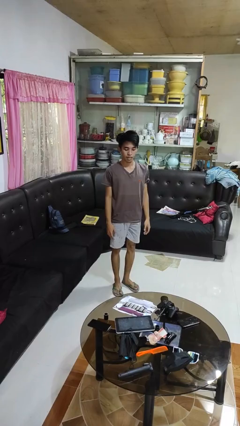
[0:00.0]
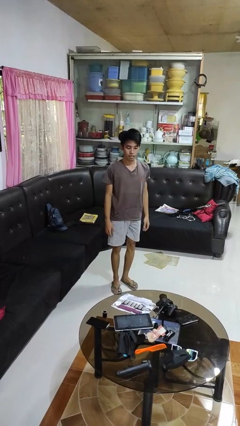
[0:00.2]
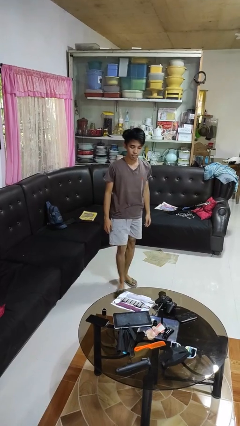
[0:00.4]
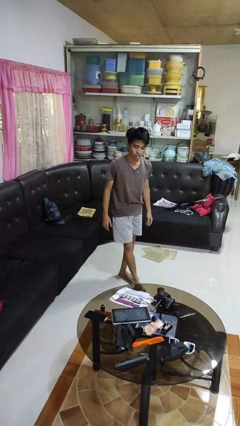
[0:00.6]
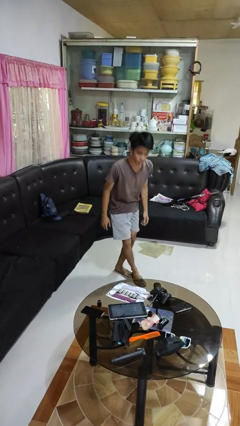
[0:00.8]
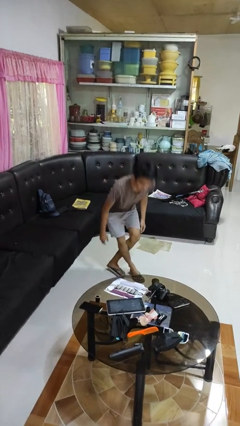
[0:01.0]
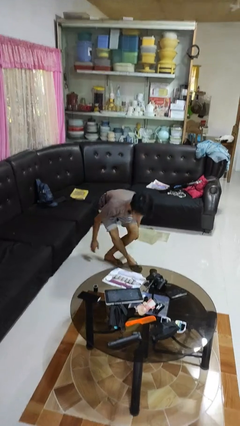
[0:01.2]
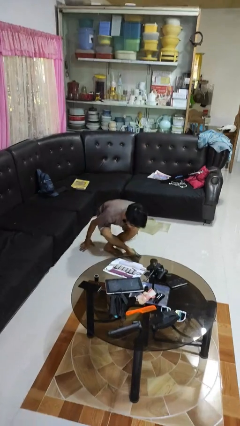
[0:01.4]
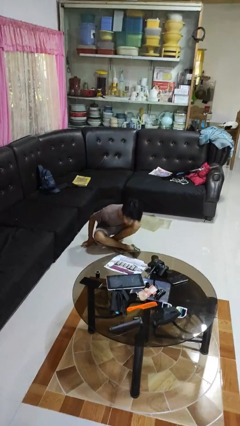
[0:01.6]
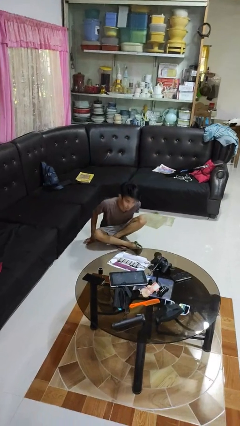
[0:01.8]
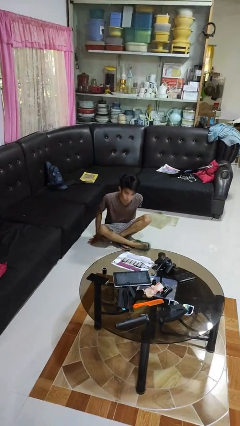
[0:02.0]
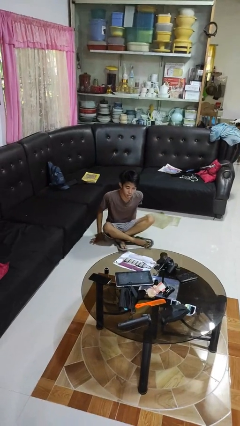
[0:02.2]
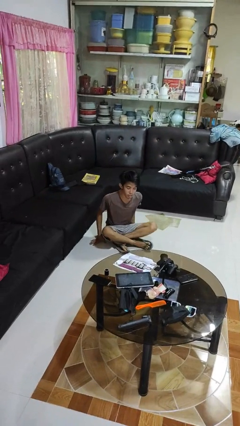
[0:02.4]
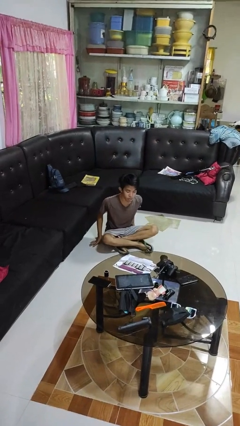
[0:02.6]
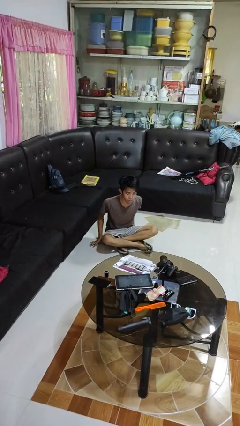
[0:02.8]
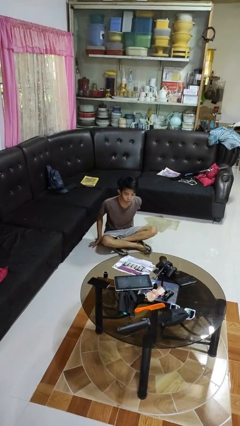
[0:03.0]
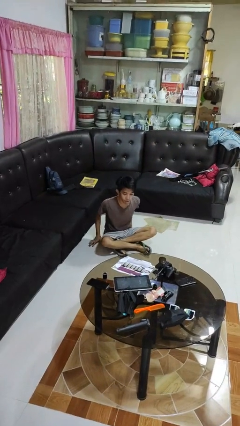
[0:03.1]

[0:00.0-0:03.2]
person sits crisscross

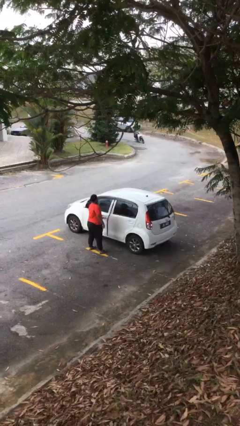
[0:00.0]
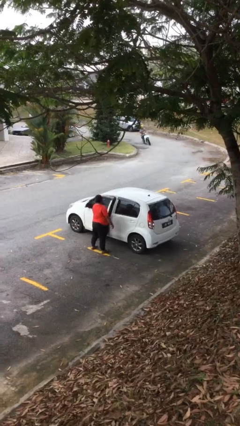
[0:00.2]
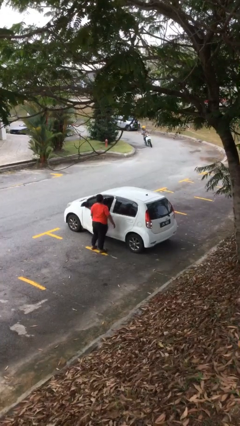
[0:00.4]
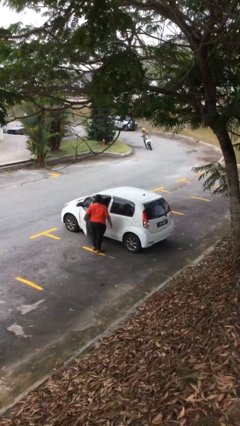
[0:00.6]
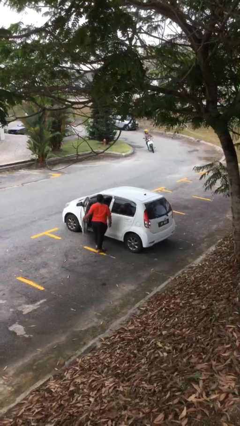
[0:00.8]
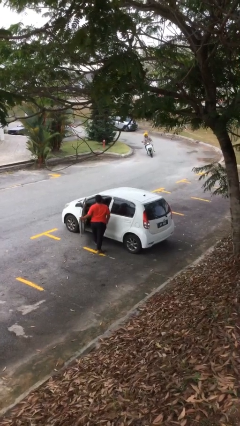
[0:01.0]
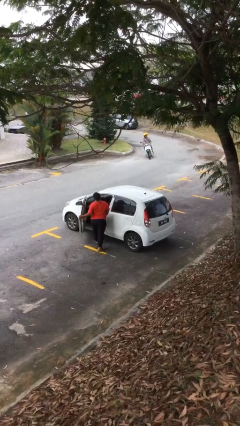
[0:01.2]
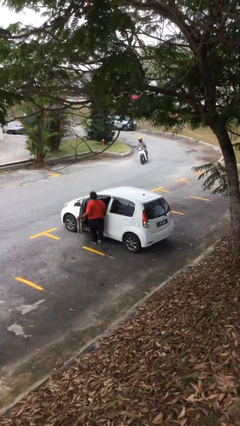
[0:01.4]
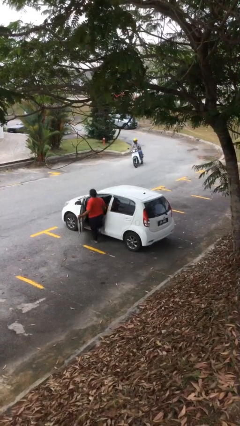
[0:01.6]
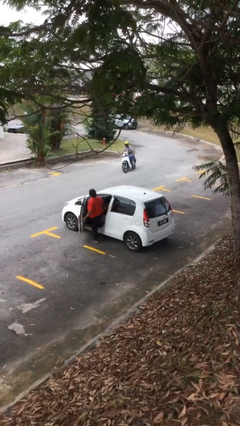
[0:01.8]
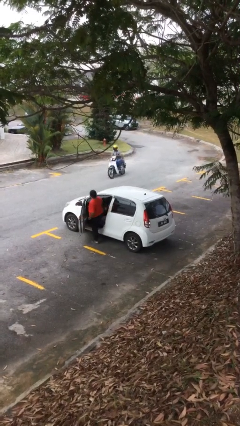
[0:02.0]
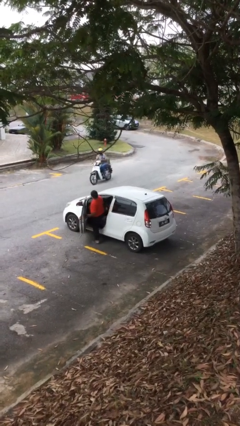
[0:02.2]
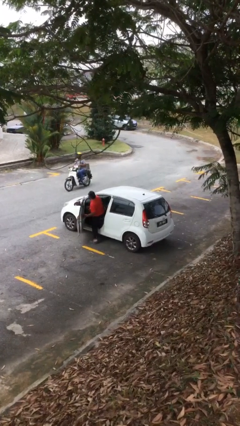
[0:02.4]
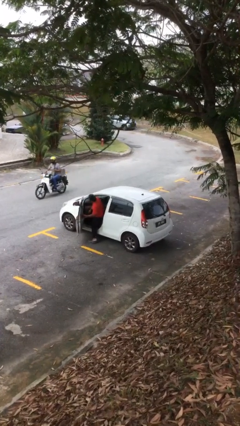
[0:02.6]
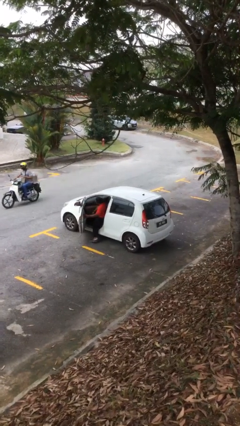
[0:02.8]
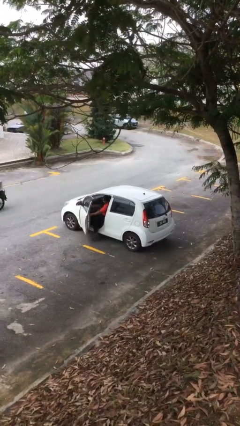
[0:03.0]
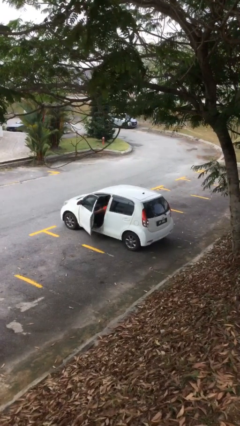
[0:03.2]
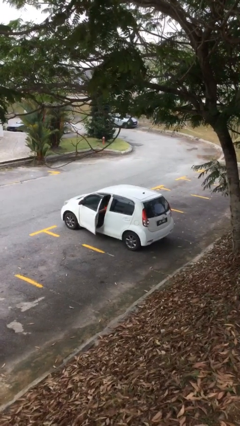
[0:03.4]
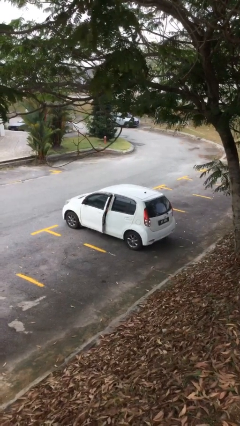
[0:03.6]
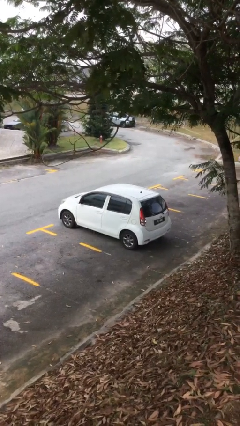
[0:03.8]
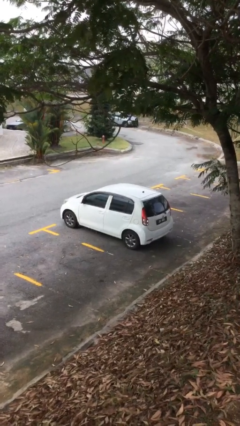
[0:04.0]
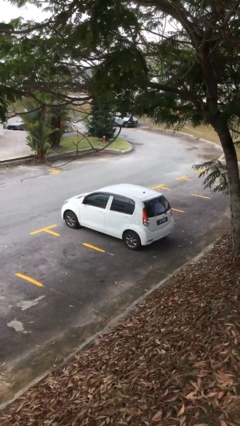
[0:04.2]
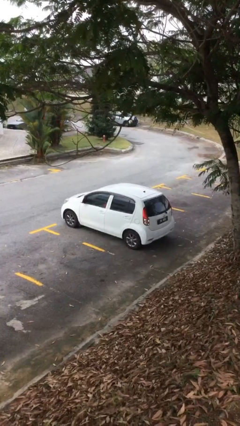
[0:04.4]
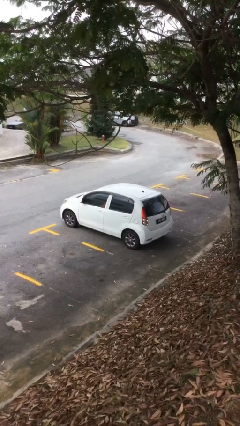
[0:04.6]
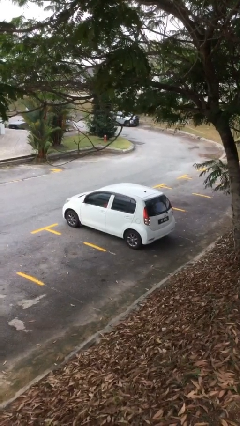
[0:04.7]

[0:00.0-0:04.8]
car picks up person

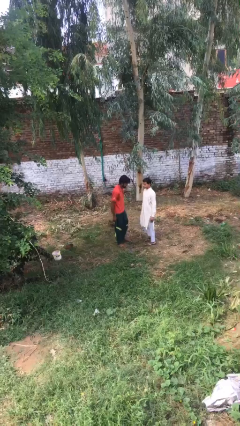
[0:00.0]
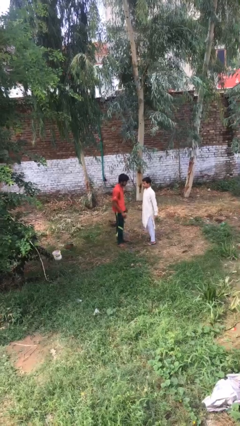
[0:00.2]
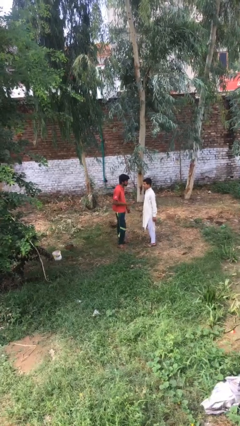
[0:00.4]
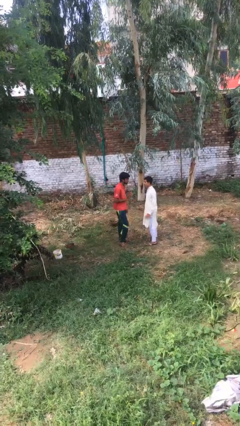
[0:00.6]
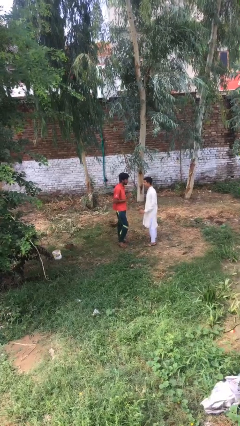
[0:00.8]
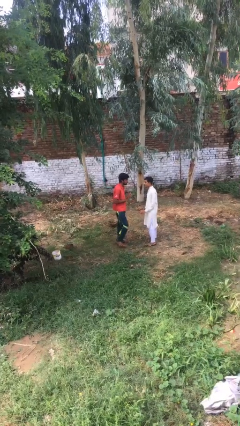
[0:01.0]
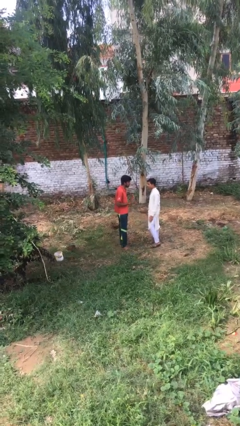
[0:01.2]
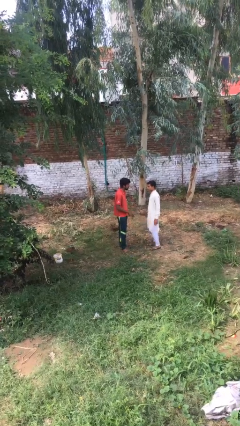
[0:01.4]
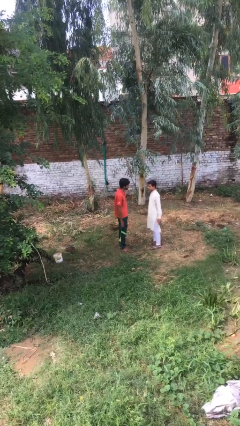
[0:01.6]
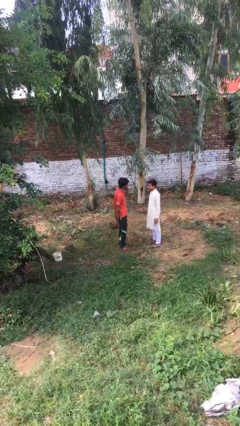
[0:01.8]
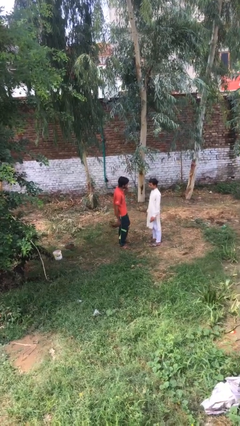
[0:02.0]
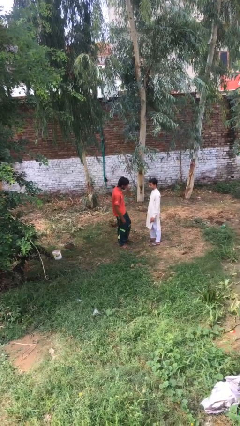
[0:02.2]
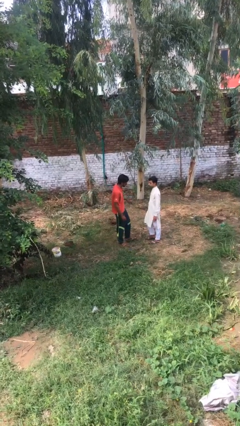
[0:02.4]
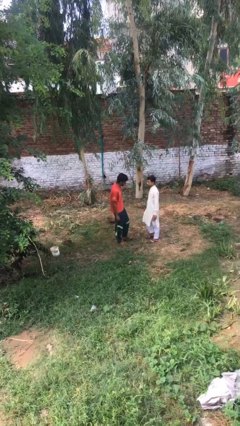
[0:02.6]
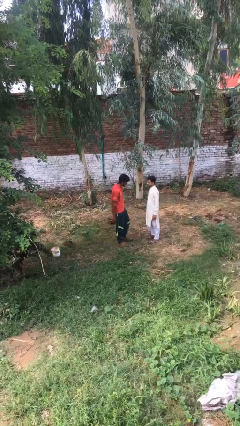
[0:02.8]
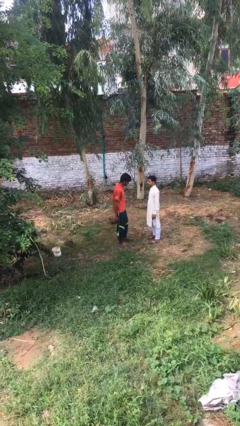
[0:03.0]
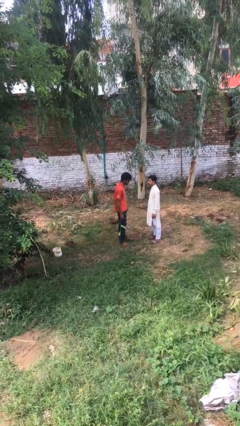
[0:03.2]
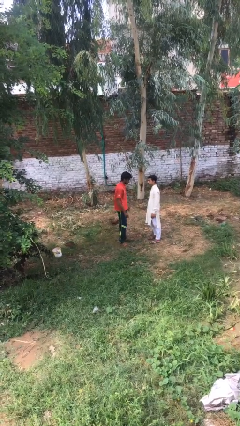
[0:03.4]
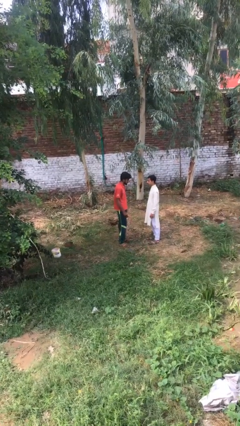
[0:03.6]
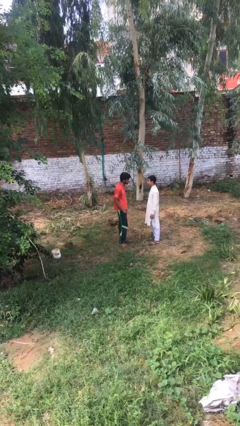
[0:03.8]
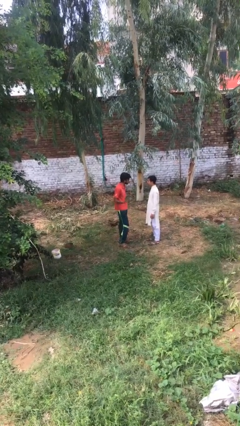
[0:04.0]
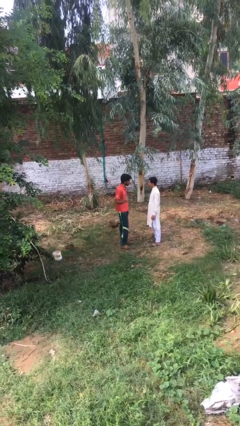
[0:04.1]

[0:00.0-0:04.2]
person talks to person

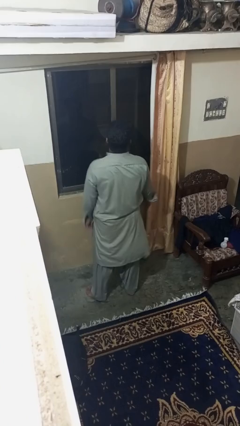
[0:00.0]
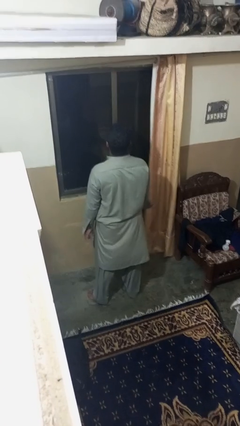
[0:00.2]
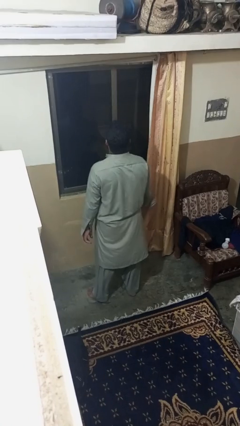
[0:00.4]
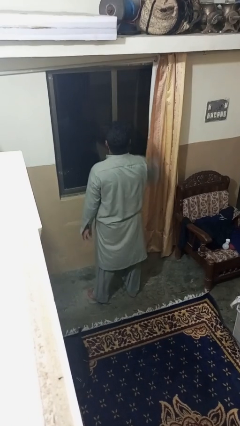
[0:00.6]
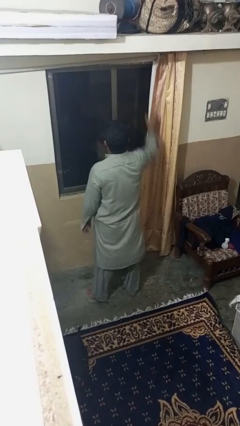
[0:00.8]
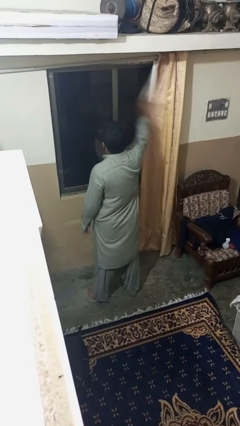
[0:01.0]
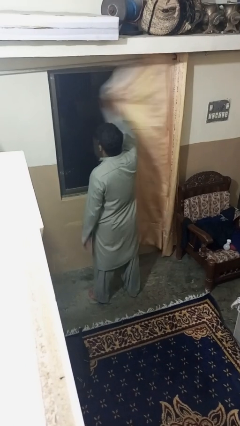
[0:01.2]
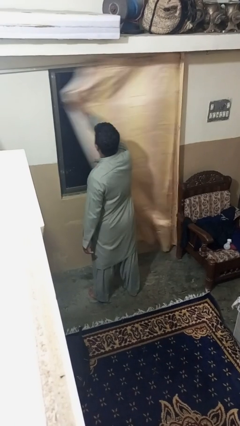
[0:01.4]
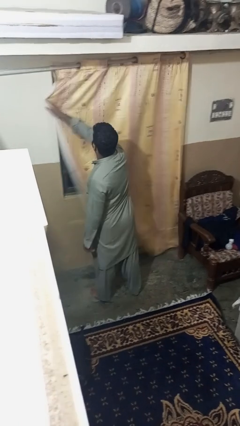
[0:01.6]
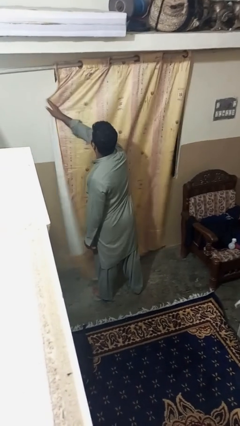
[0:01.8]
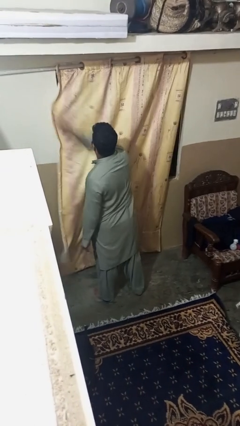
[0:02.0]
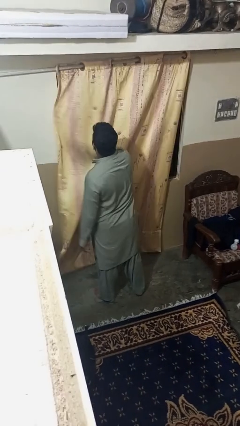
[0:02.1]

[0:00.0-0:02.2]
person closes curtains

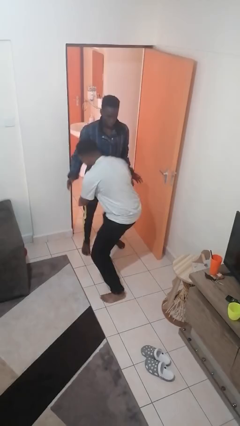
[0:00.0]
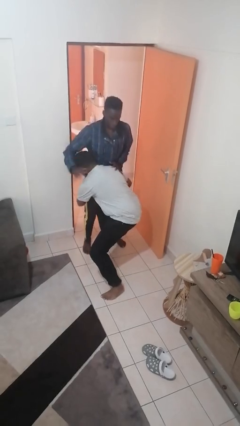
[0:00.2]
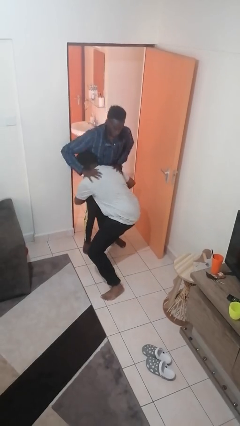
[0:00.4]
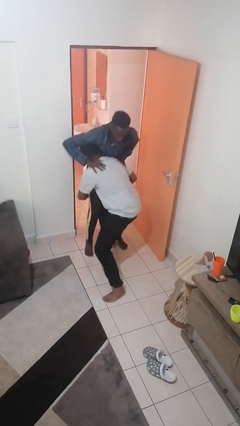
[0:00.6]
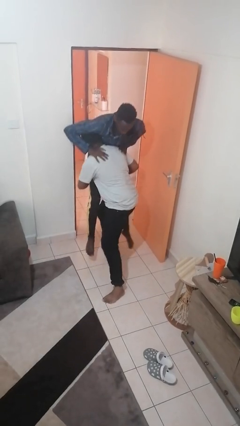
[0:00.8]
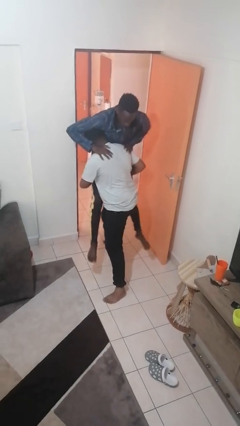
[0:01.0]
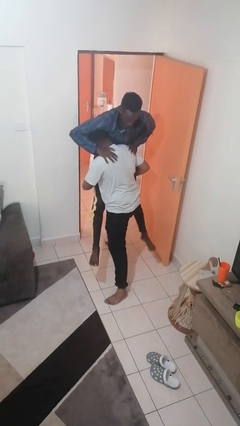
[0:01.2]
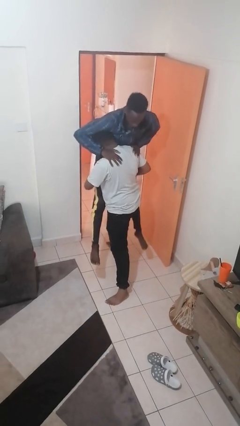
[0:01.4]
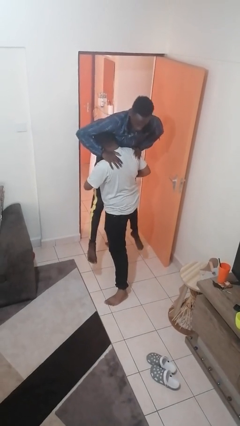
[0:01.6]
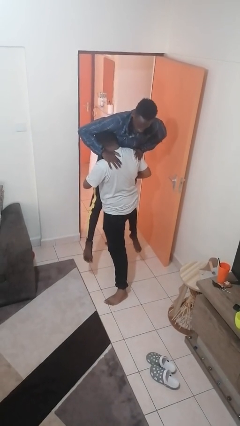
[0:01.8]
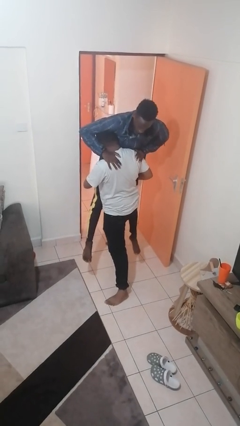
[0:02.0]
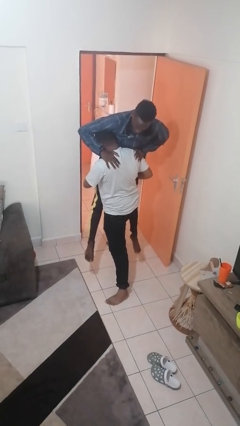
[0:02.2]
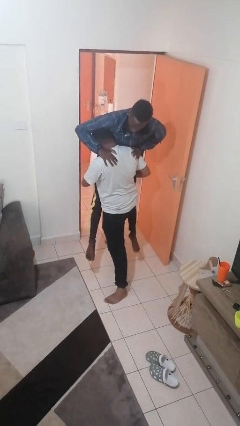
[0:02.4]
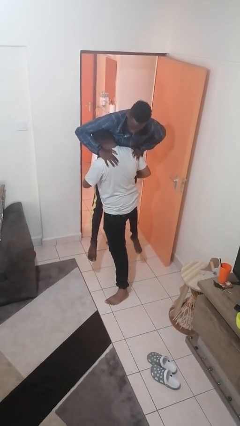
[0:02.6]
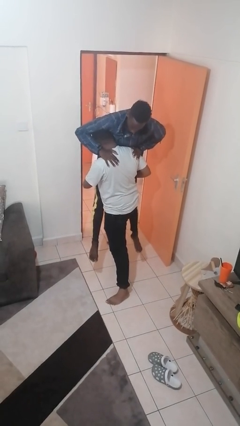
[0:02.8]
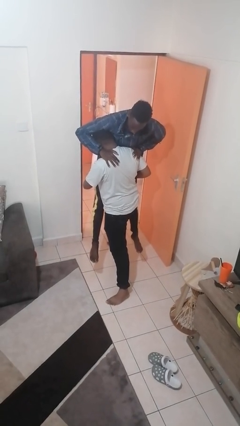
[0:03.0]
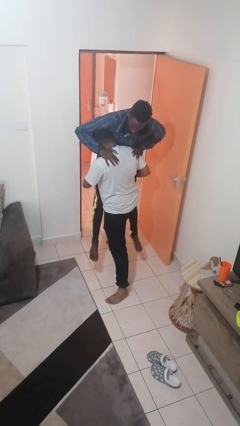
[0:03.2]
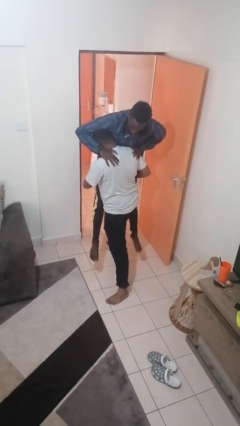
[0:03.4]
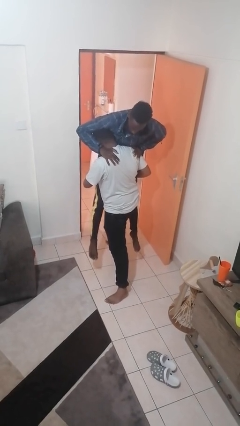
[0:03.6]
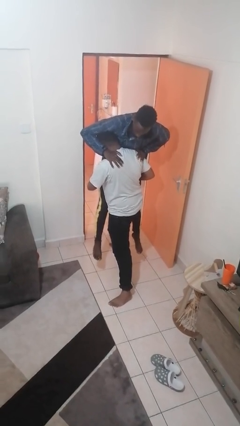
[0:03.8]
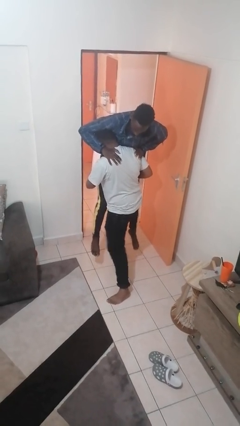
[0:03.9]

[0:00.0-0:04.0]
person picks up person
